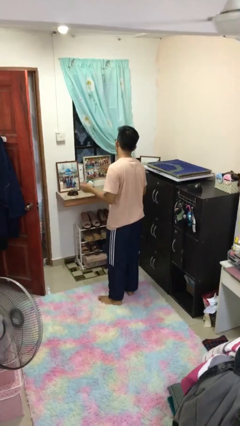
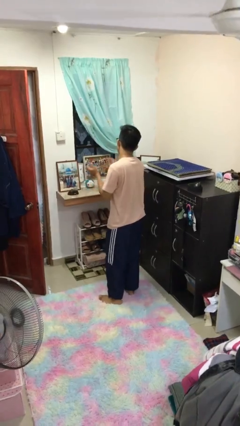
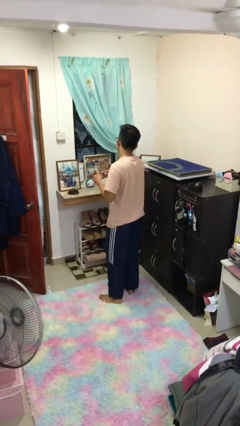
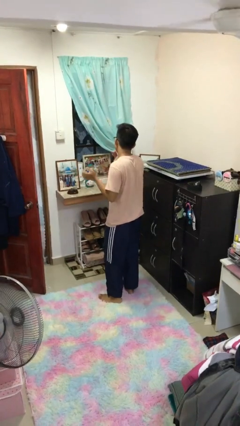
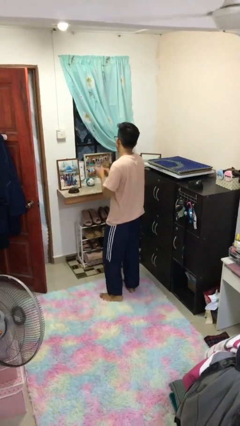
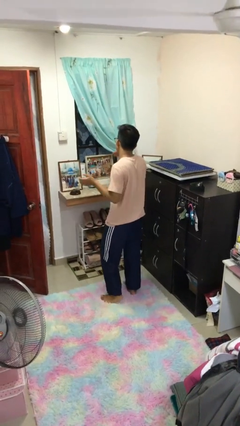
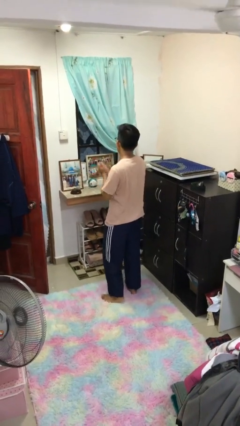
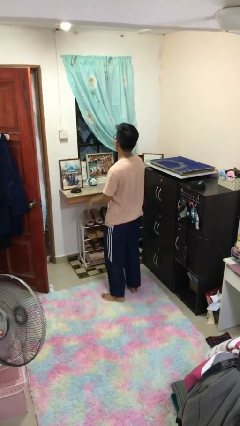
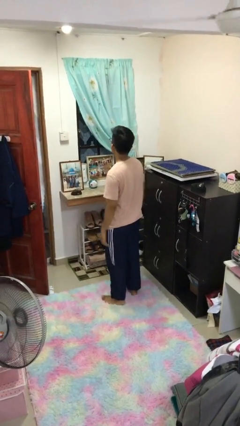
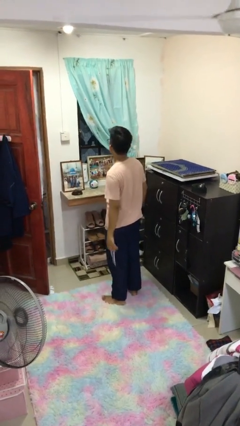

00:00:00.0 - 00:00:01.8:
person claps hands

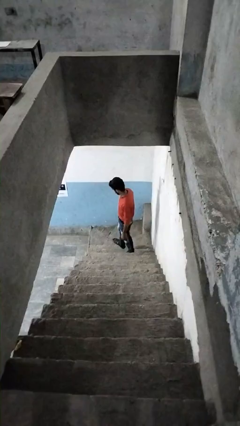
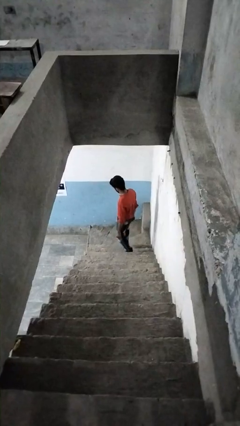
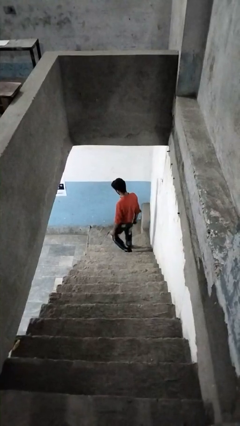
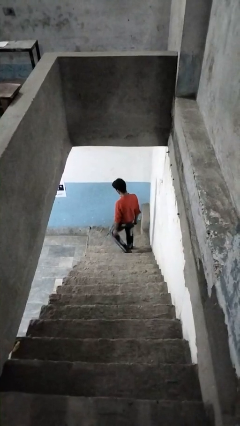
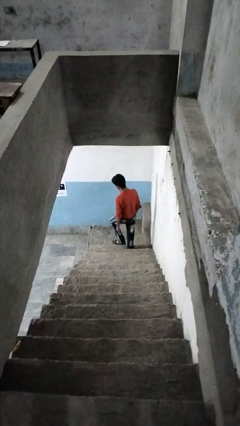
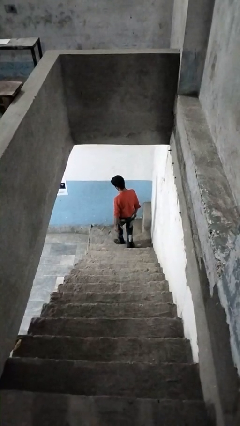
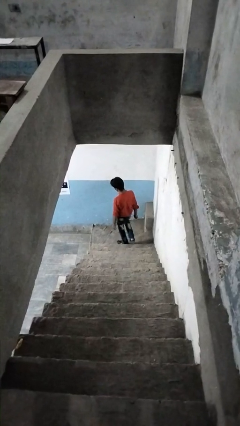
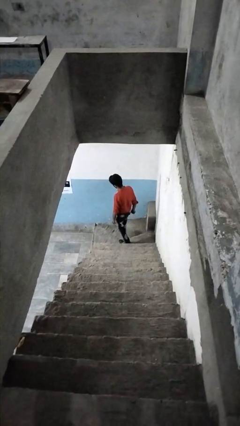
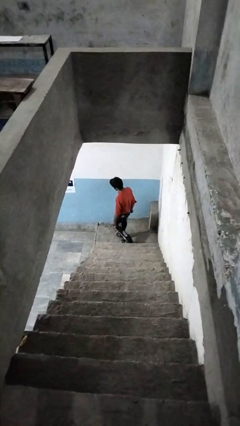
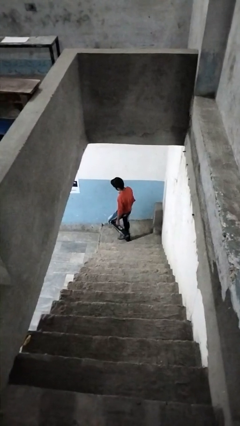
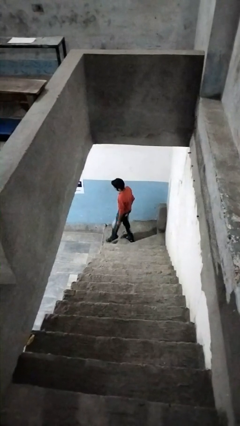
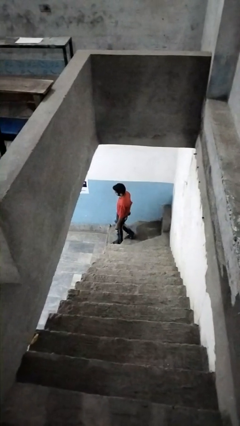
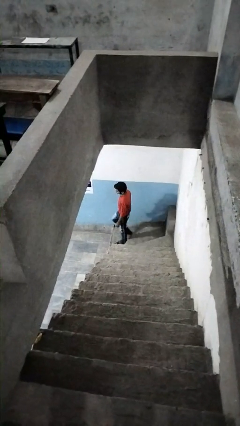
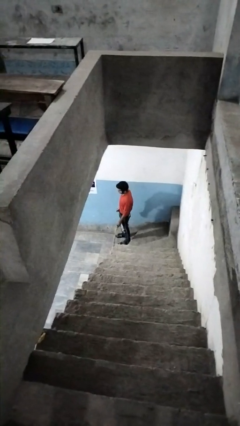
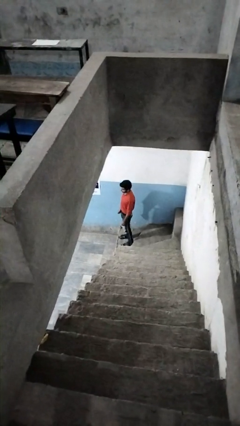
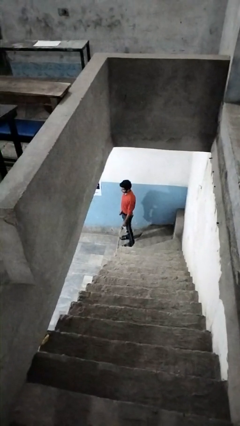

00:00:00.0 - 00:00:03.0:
person climbs down stairs

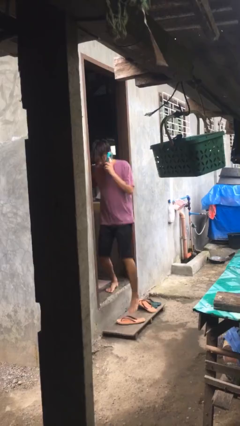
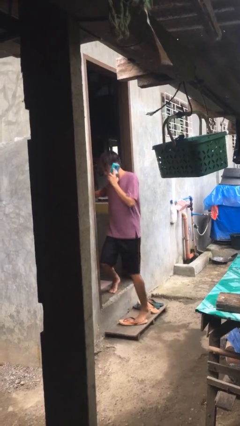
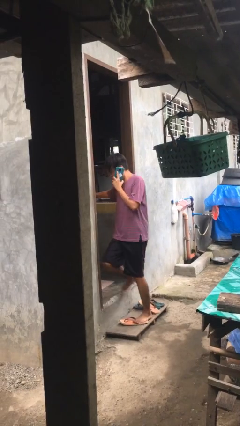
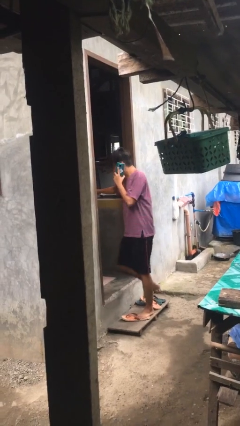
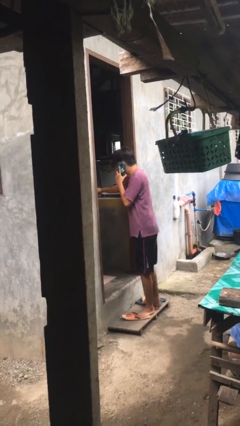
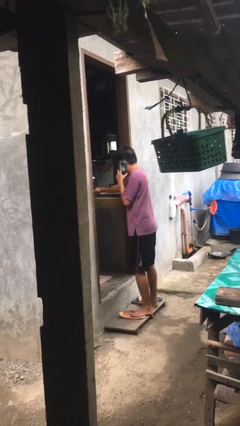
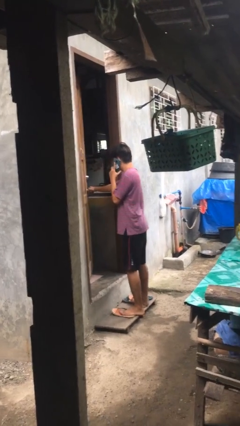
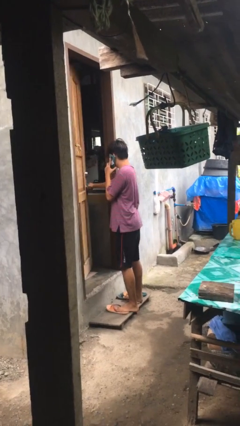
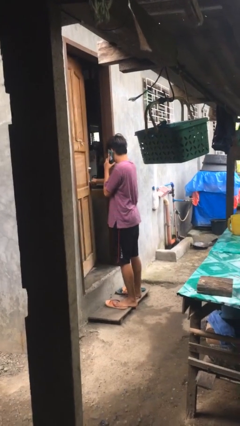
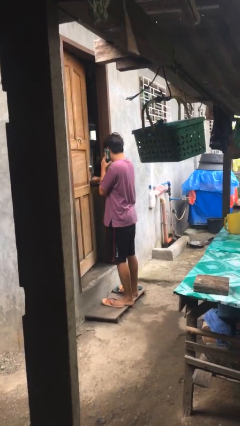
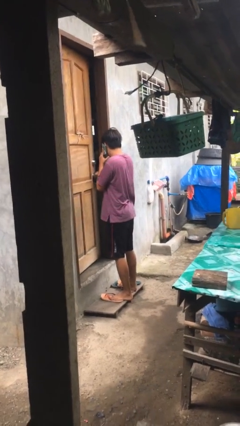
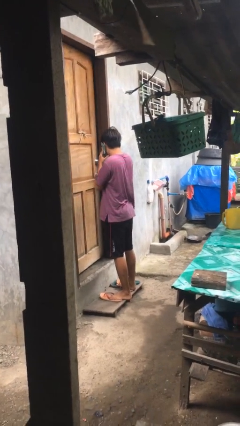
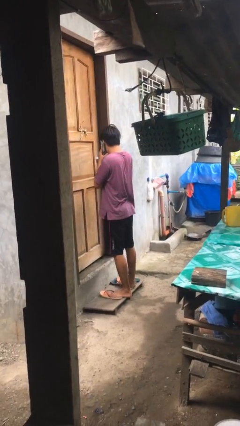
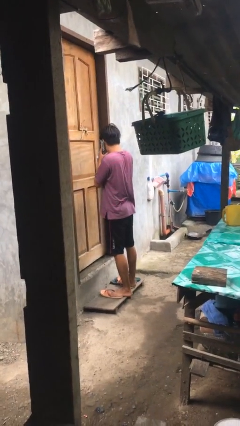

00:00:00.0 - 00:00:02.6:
person enters scene through structure

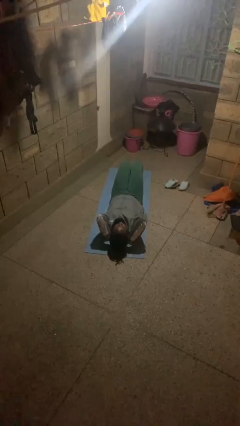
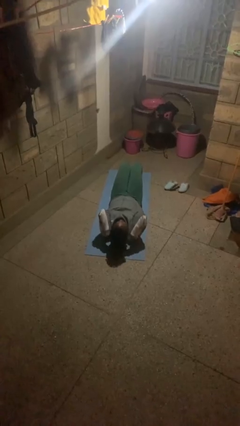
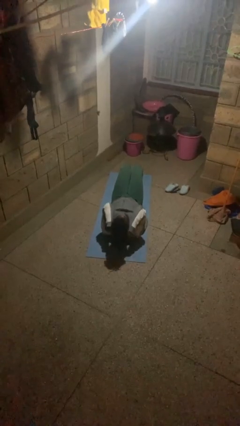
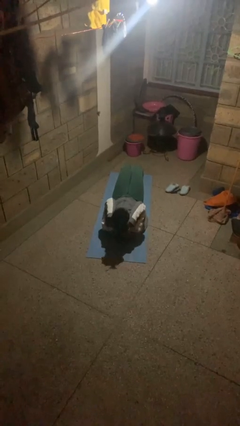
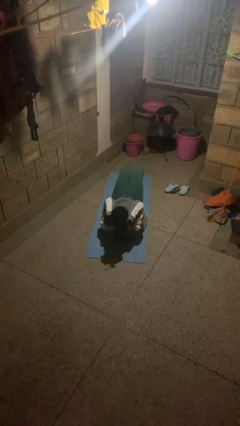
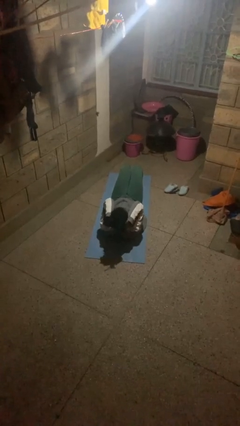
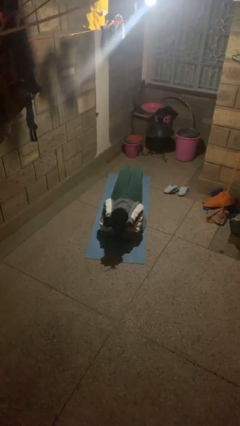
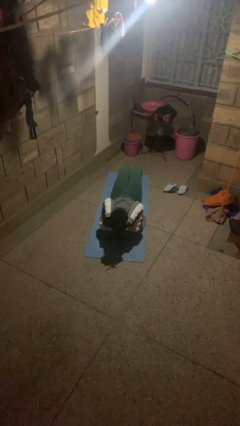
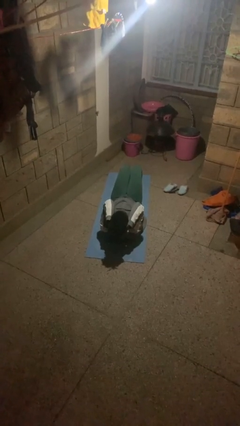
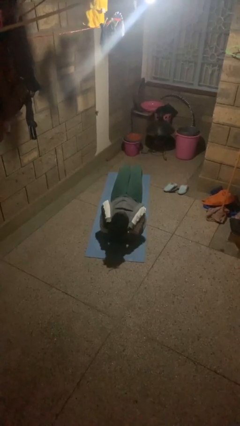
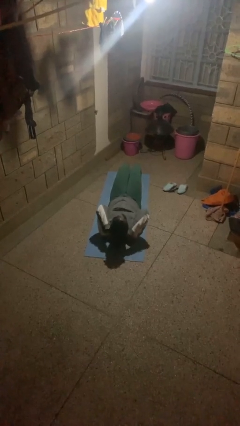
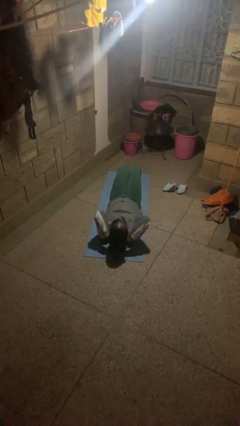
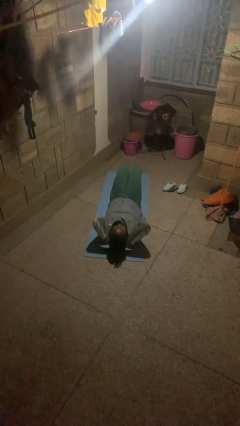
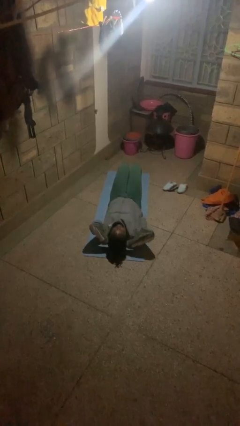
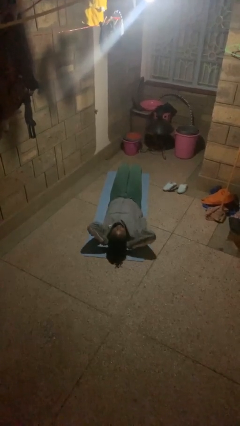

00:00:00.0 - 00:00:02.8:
person exercises with situp

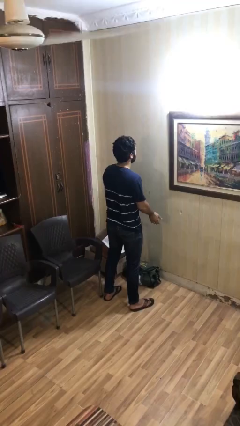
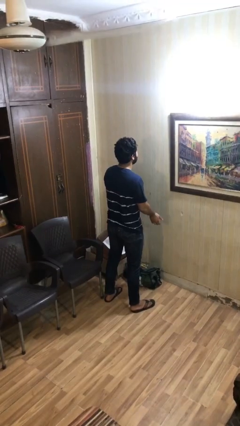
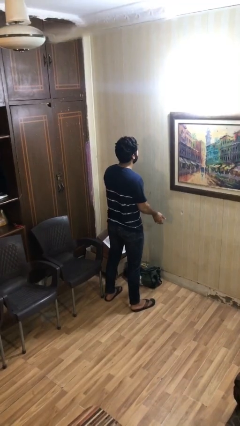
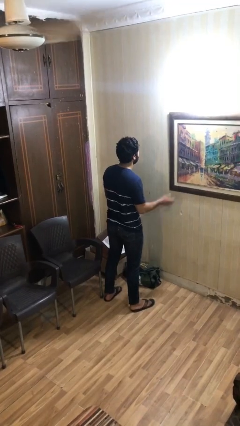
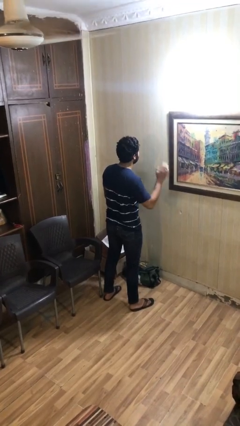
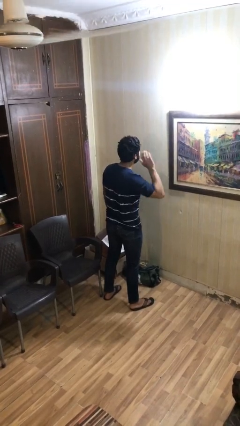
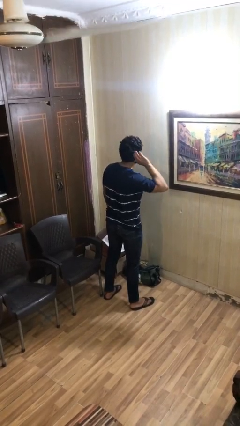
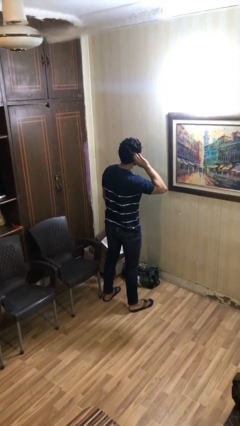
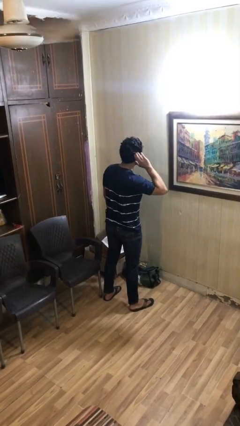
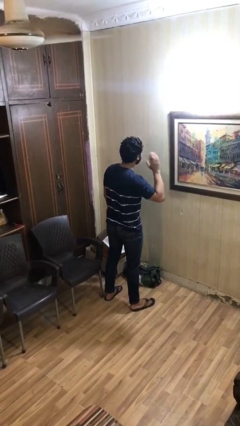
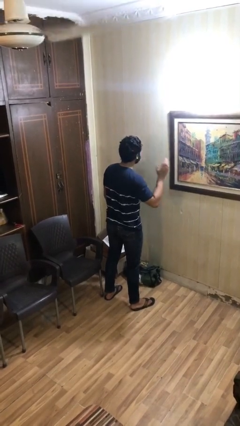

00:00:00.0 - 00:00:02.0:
person gestures listen closely

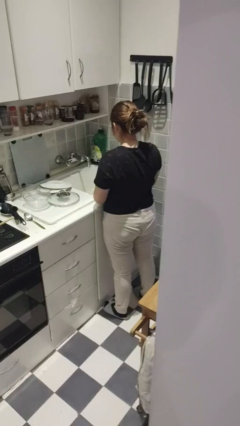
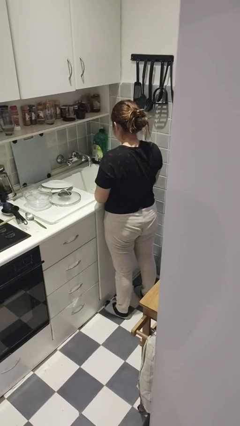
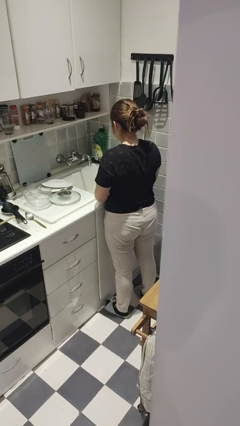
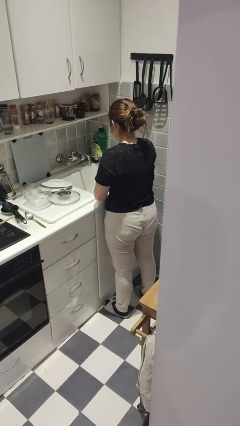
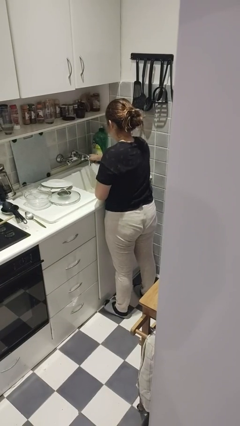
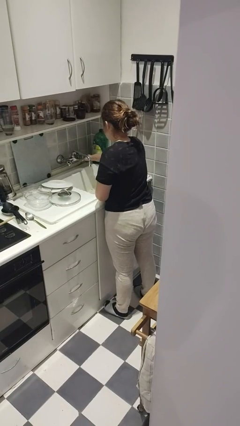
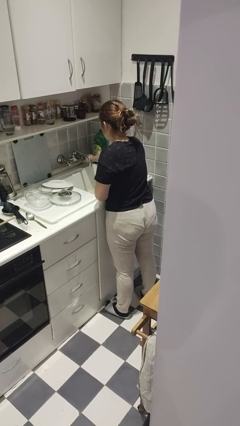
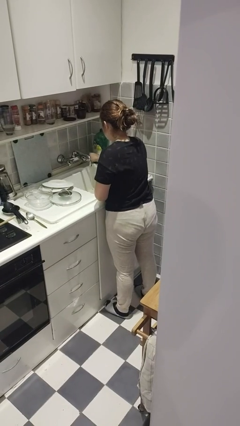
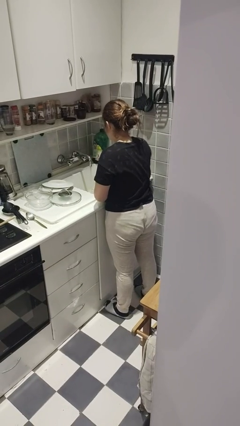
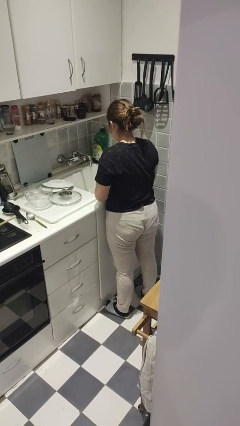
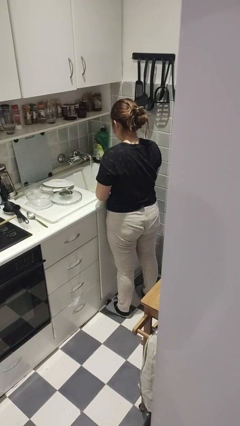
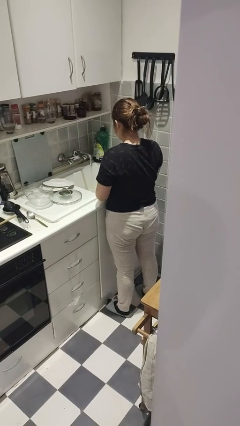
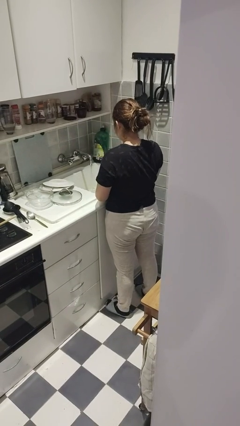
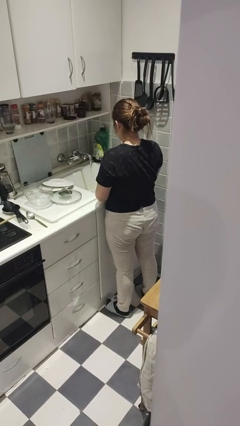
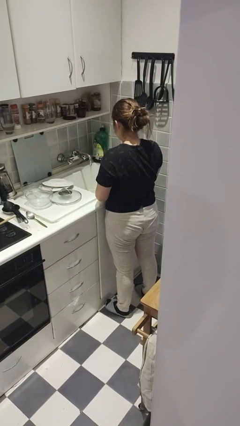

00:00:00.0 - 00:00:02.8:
person turns on faucet

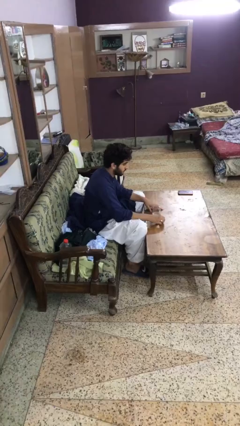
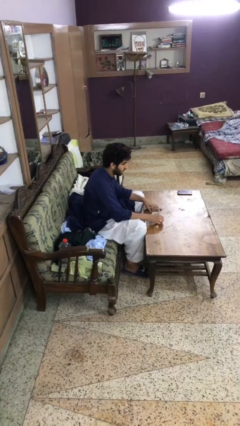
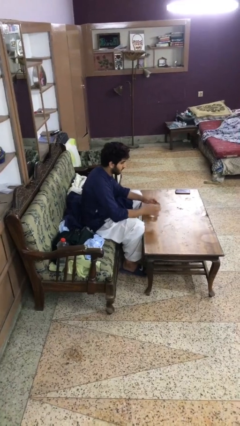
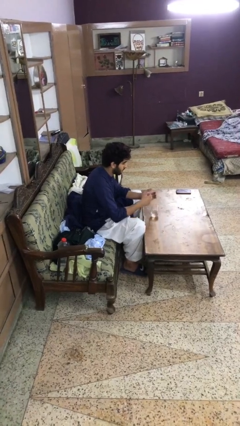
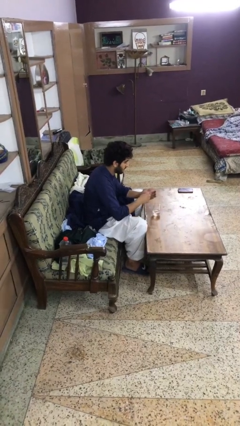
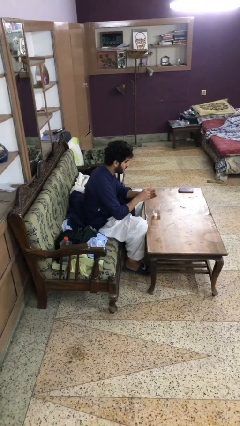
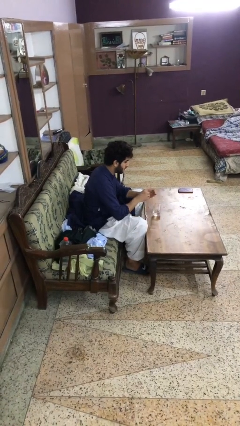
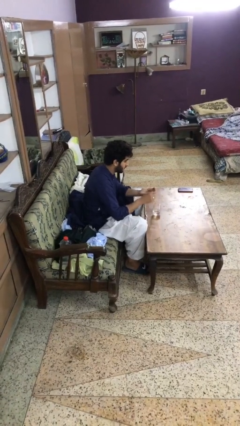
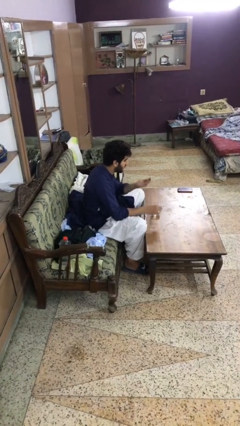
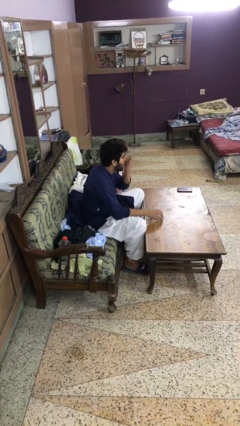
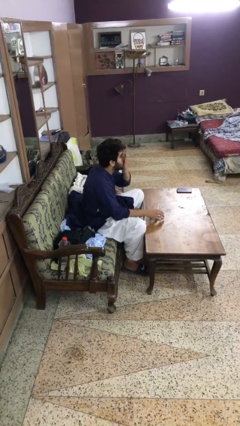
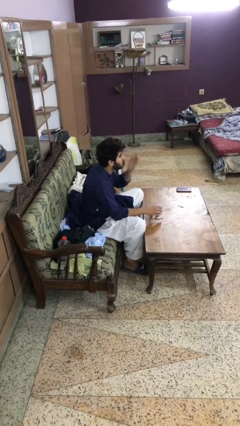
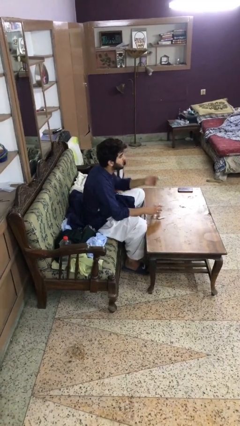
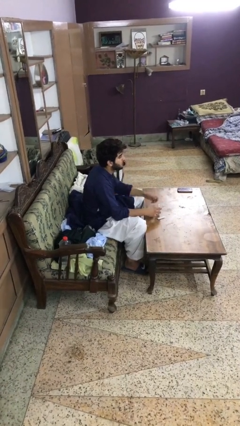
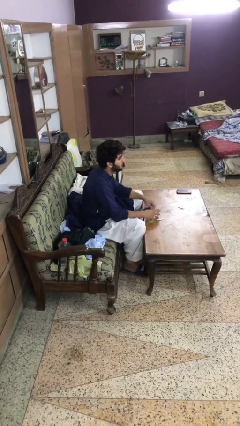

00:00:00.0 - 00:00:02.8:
person takes medicine pills
